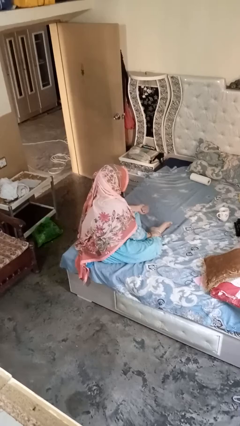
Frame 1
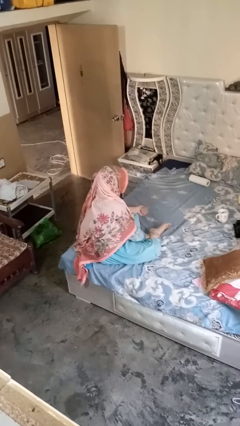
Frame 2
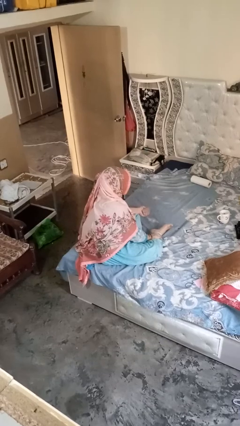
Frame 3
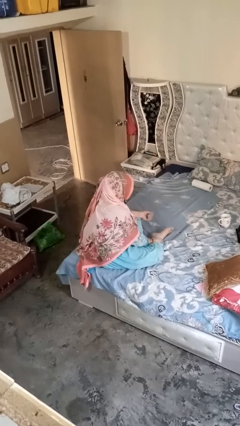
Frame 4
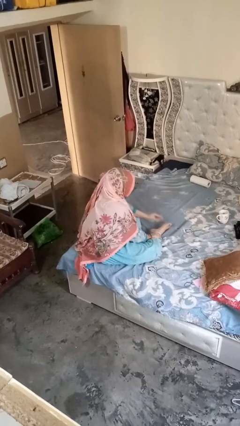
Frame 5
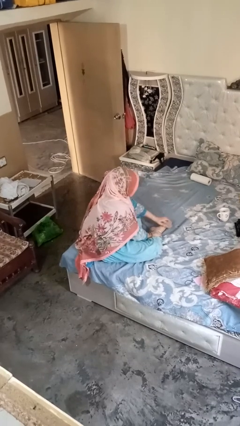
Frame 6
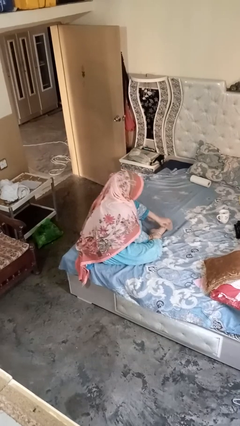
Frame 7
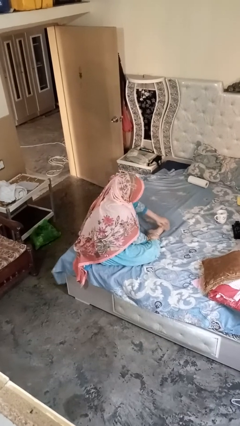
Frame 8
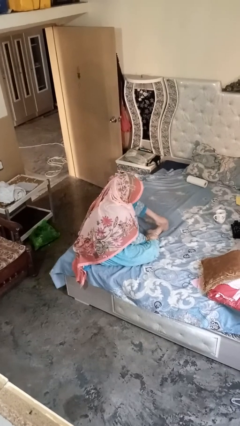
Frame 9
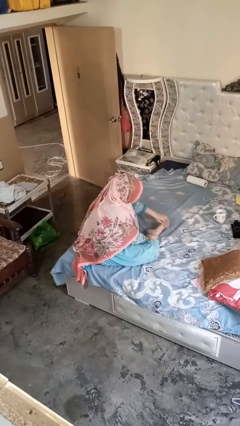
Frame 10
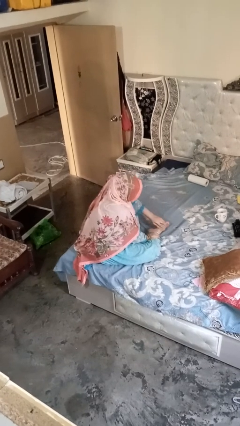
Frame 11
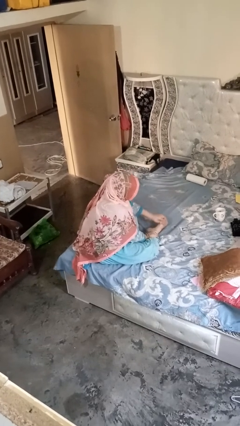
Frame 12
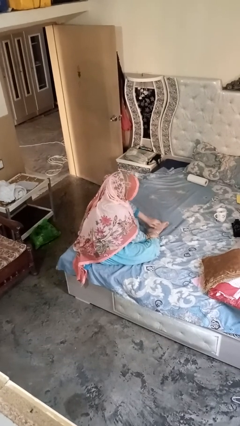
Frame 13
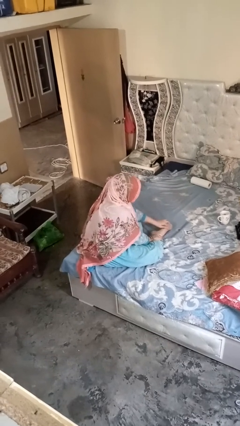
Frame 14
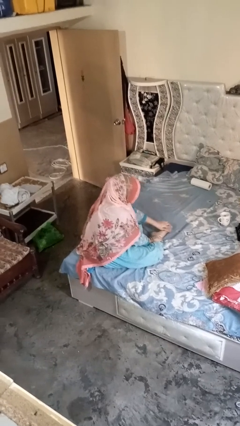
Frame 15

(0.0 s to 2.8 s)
person rubs foot

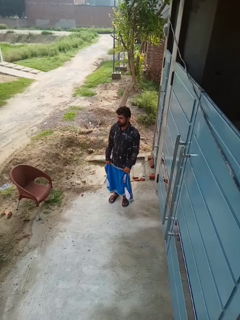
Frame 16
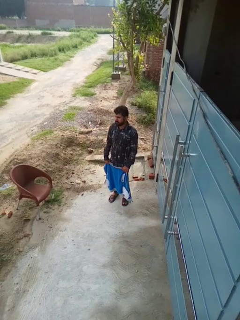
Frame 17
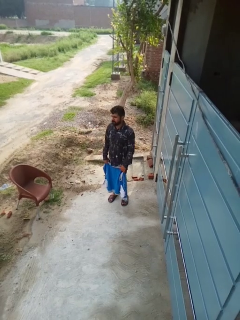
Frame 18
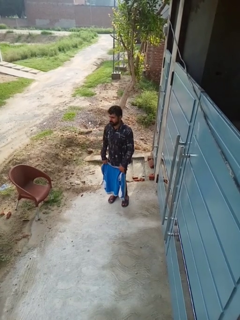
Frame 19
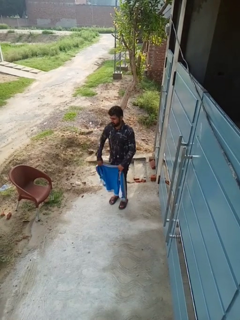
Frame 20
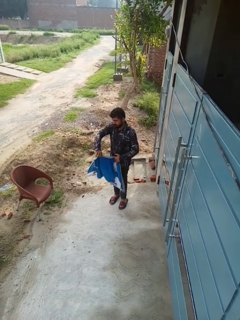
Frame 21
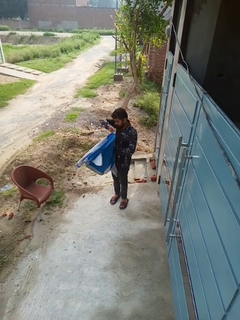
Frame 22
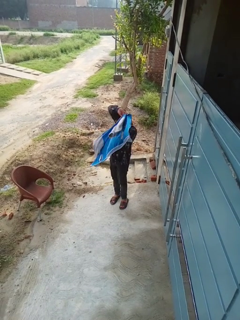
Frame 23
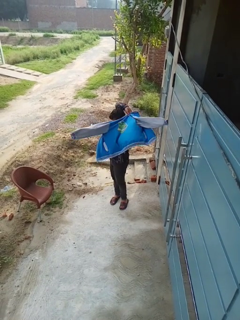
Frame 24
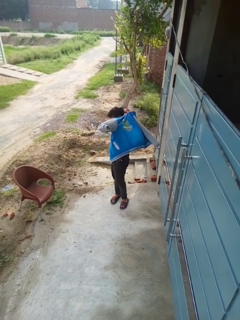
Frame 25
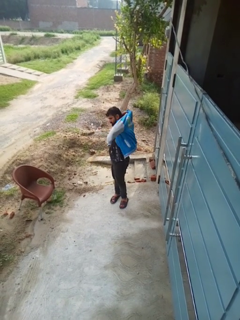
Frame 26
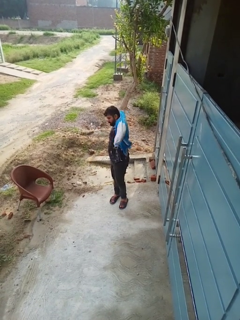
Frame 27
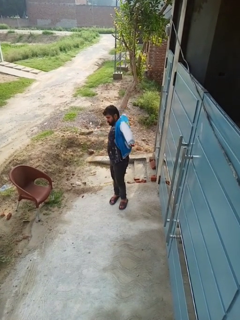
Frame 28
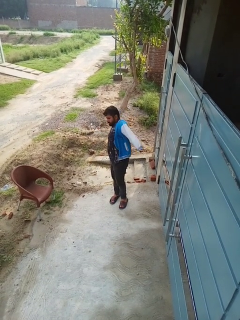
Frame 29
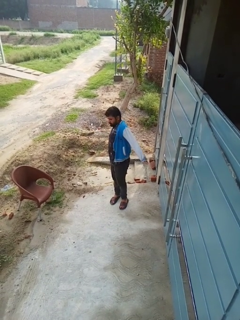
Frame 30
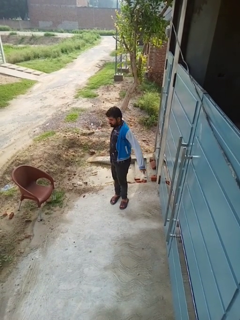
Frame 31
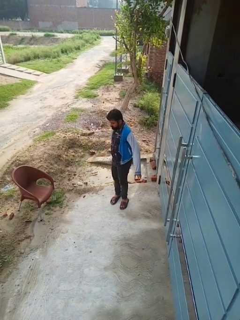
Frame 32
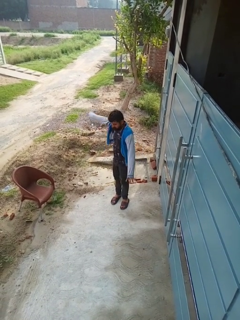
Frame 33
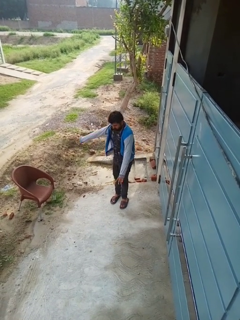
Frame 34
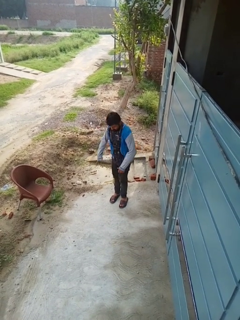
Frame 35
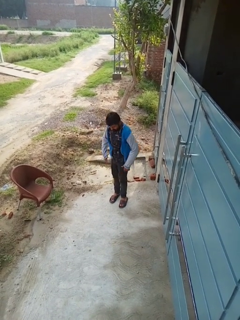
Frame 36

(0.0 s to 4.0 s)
person puts on jacket

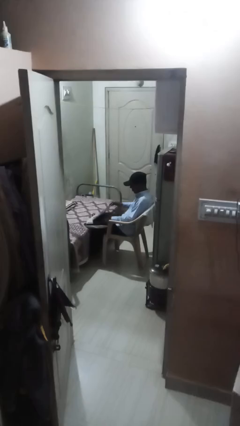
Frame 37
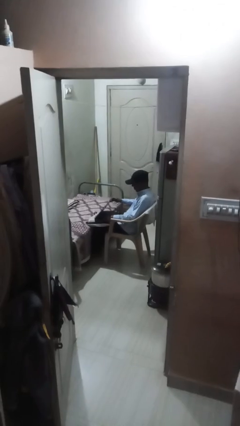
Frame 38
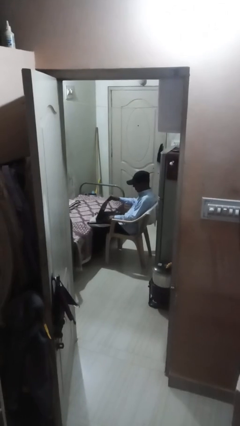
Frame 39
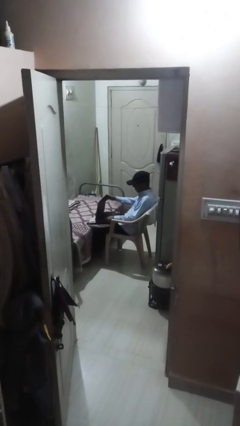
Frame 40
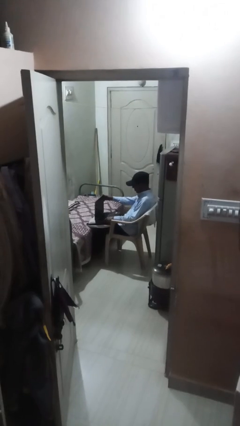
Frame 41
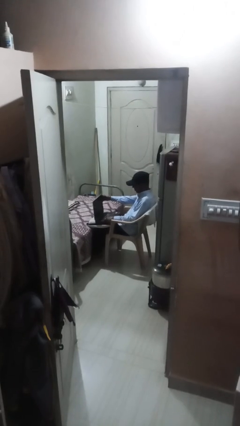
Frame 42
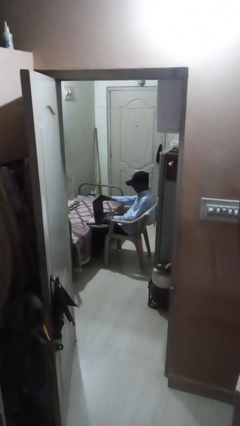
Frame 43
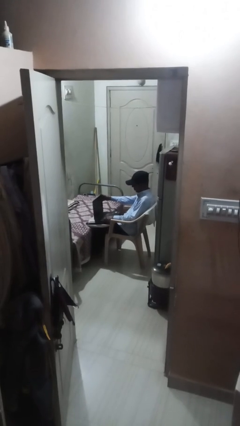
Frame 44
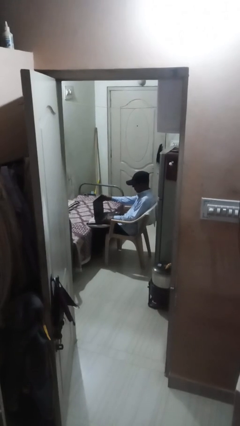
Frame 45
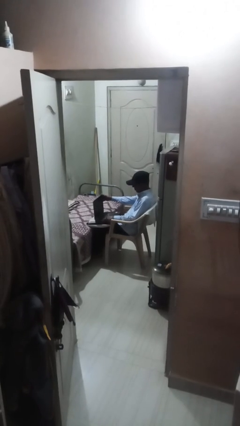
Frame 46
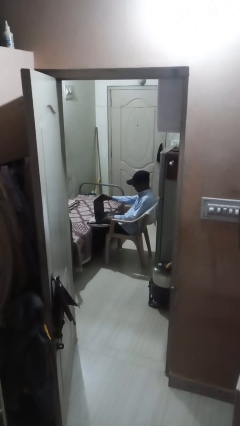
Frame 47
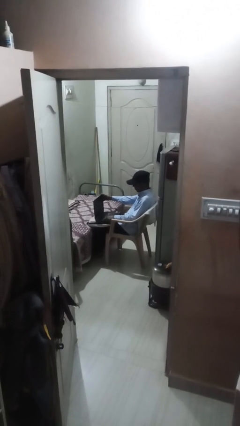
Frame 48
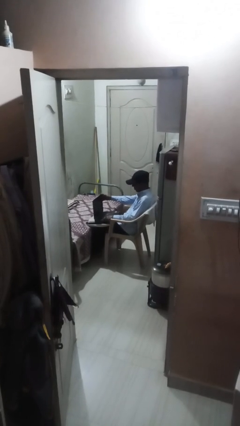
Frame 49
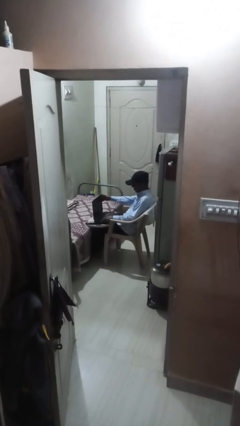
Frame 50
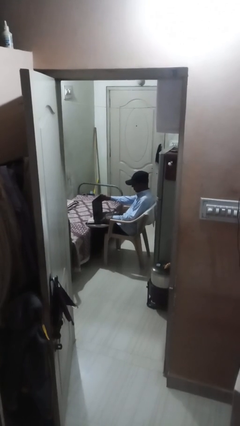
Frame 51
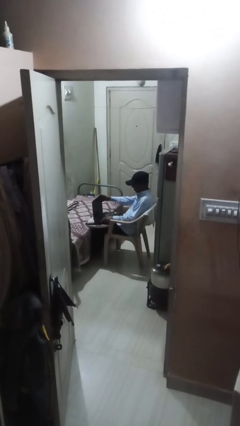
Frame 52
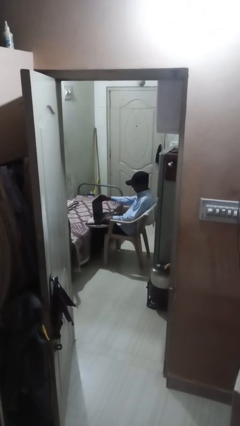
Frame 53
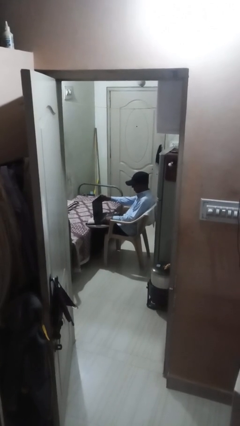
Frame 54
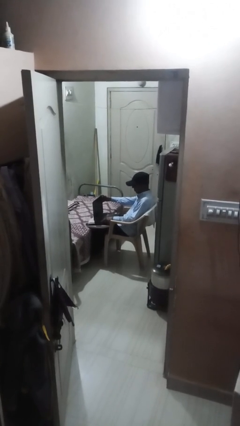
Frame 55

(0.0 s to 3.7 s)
person interacts with laptop

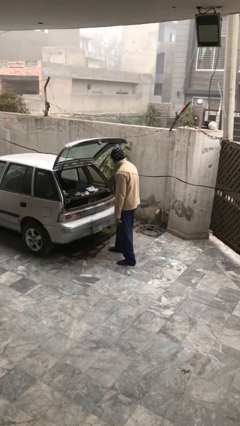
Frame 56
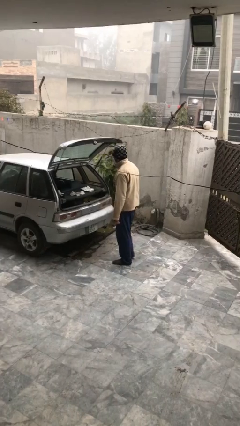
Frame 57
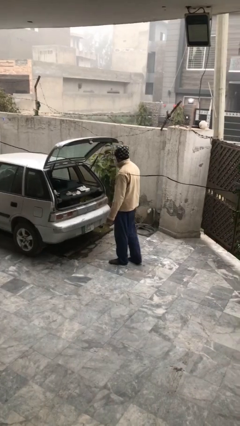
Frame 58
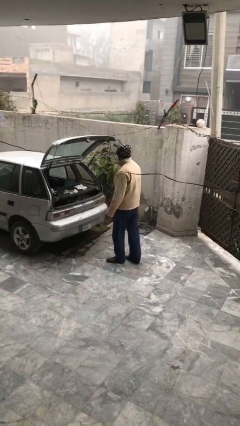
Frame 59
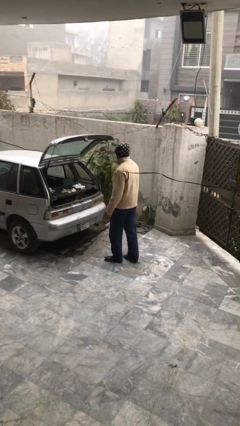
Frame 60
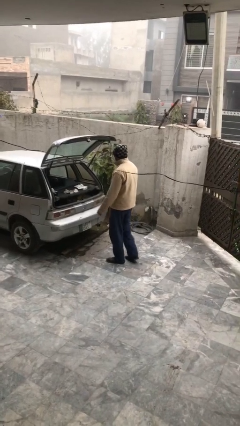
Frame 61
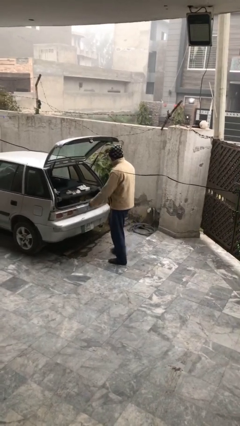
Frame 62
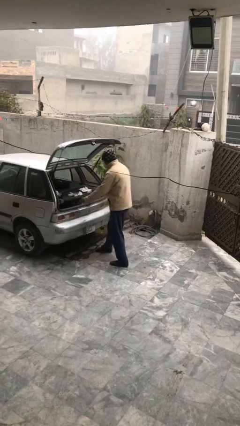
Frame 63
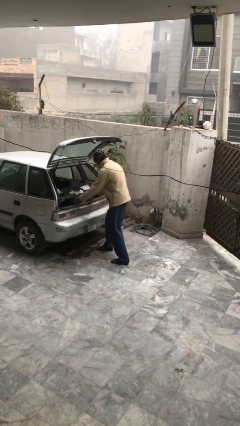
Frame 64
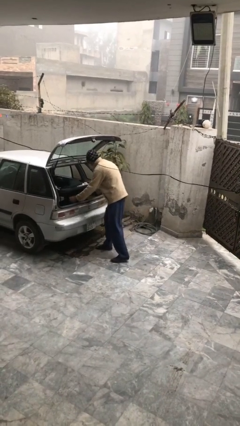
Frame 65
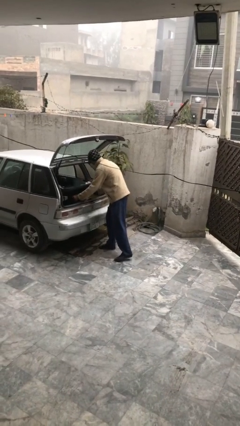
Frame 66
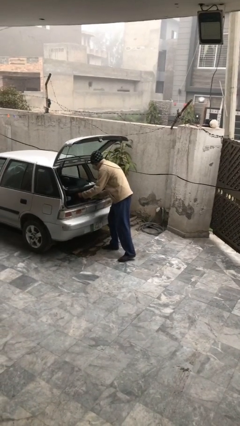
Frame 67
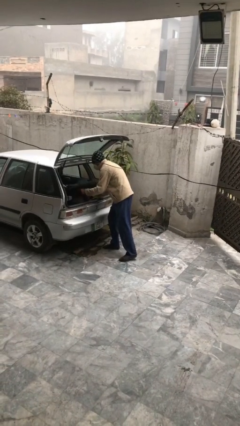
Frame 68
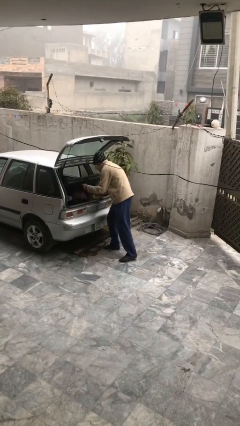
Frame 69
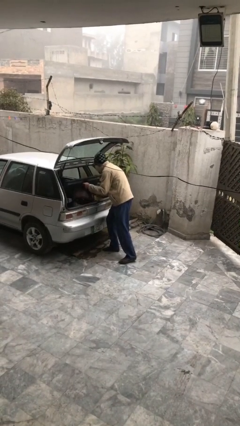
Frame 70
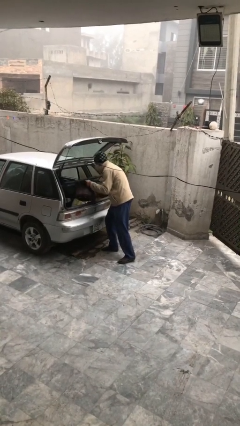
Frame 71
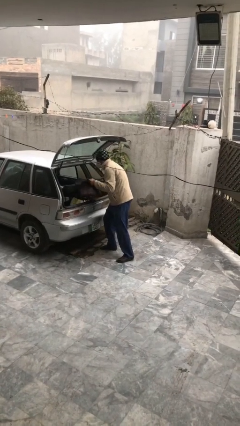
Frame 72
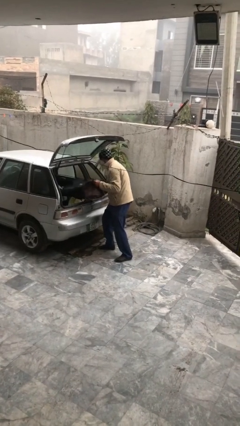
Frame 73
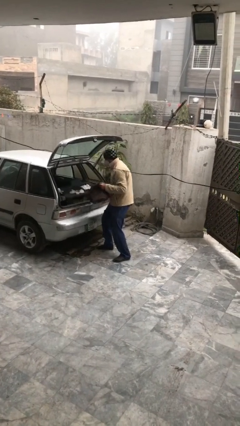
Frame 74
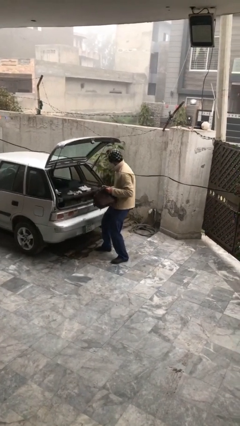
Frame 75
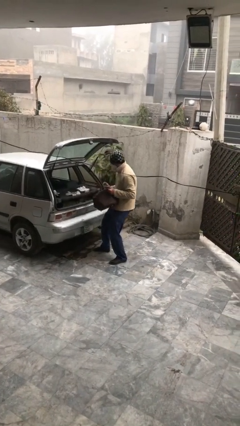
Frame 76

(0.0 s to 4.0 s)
person unloads car

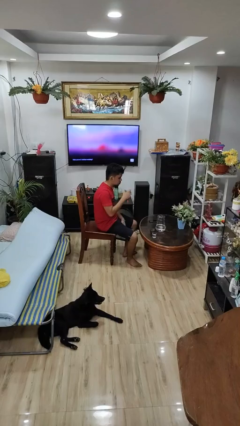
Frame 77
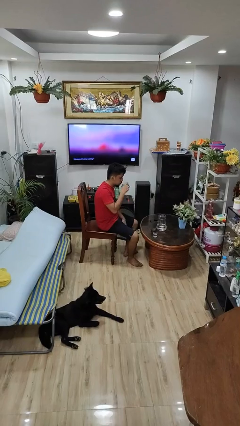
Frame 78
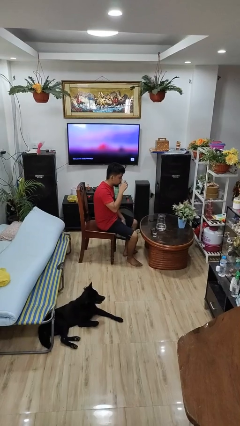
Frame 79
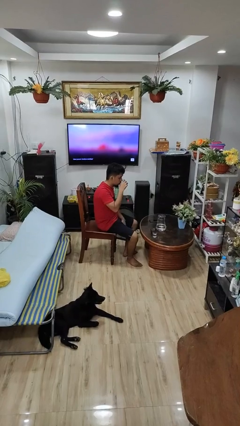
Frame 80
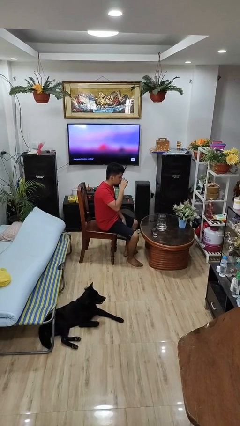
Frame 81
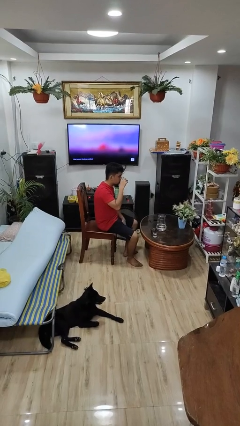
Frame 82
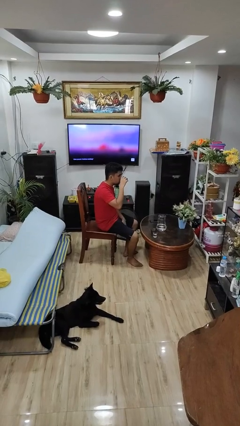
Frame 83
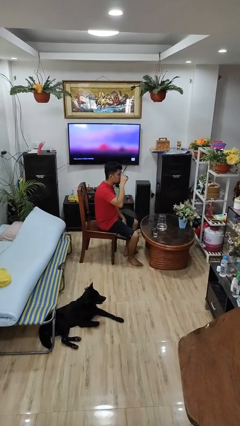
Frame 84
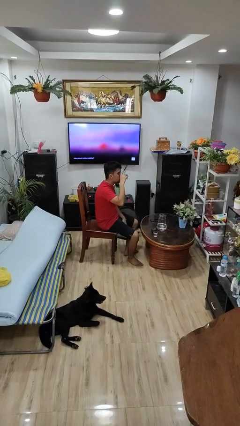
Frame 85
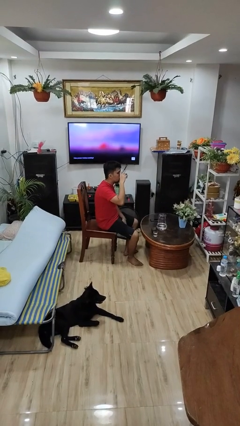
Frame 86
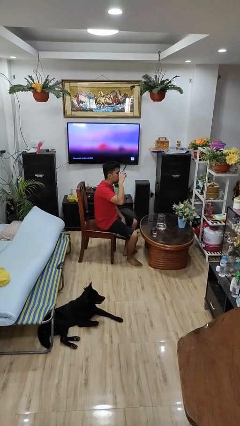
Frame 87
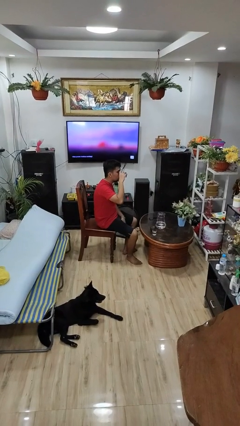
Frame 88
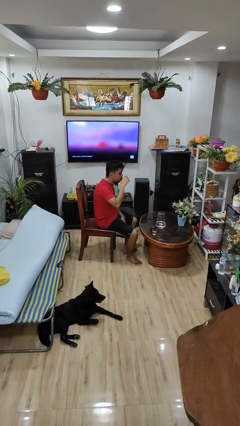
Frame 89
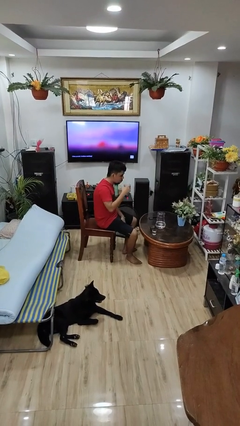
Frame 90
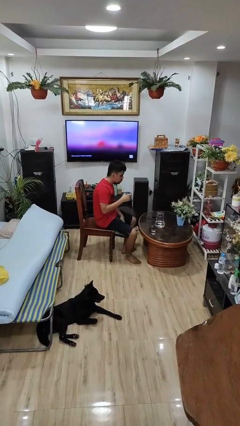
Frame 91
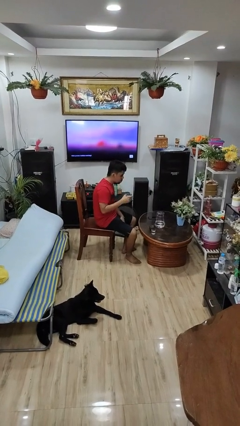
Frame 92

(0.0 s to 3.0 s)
person drinks from shotglass

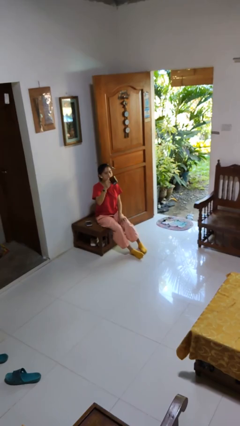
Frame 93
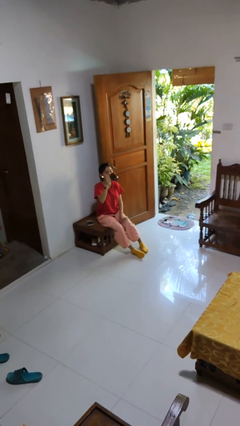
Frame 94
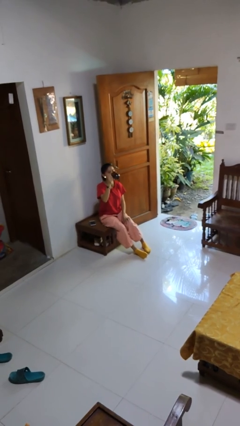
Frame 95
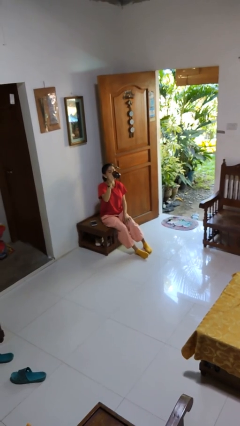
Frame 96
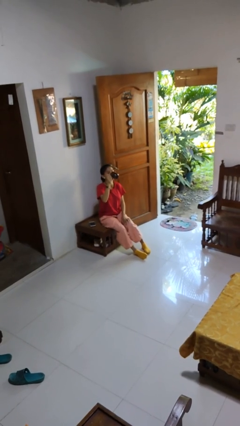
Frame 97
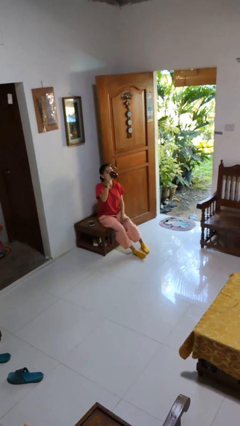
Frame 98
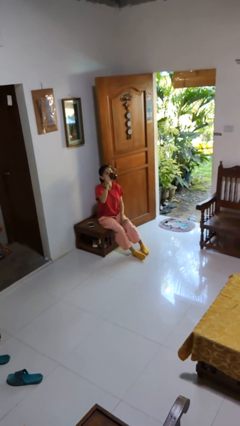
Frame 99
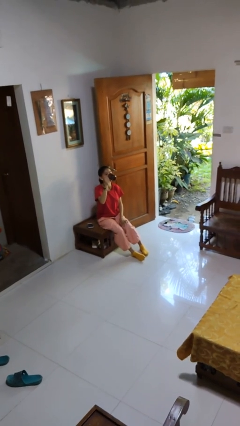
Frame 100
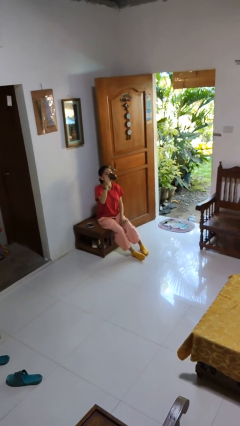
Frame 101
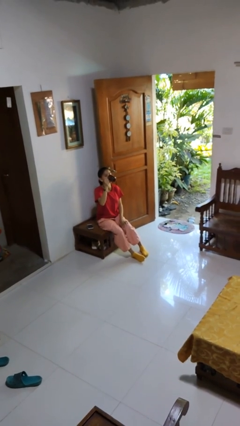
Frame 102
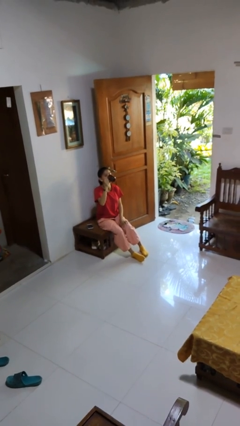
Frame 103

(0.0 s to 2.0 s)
person drinks from mug
